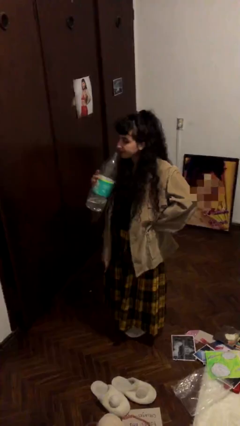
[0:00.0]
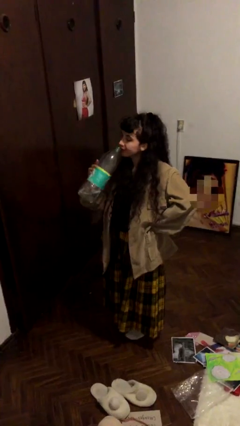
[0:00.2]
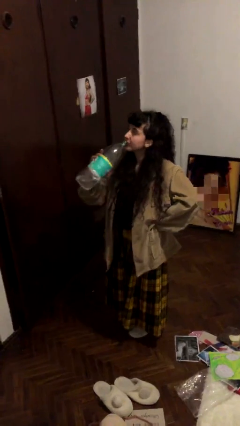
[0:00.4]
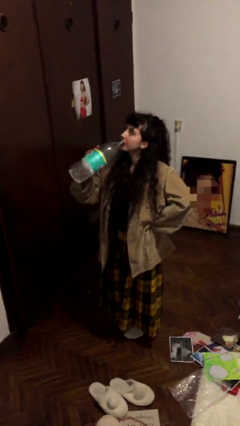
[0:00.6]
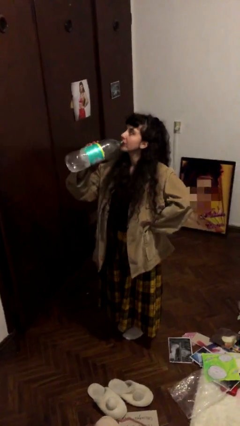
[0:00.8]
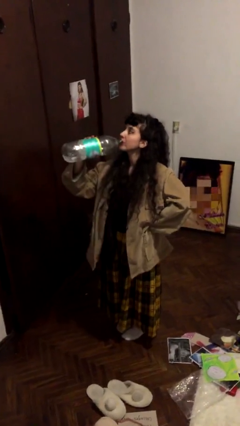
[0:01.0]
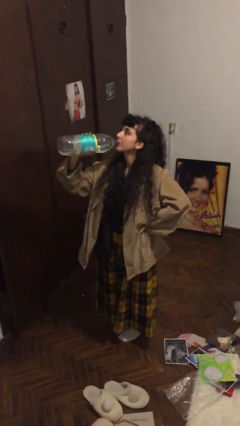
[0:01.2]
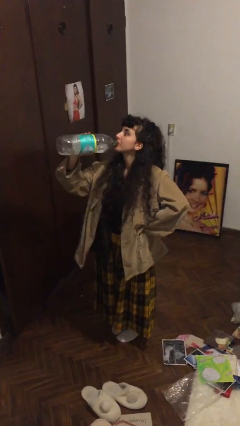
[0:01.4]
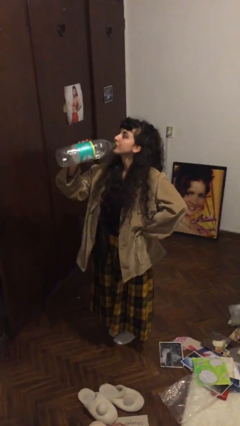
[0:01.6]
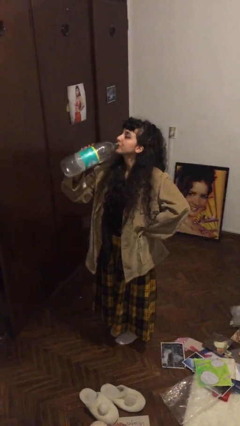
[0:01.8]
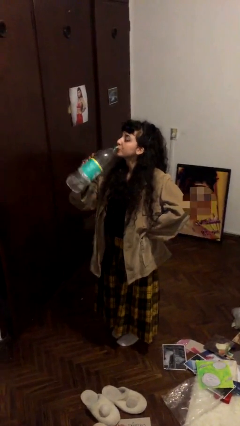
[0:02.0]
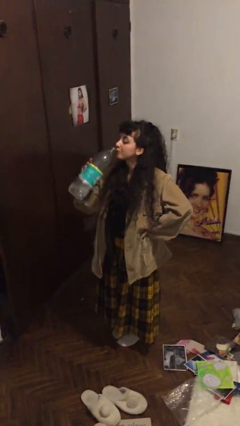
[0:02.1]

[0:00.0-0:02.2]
person drinks from bottle

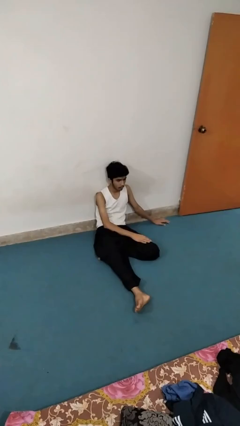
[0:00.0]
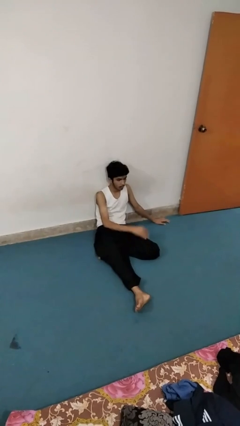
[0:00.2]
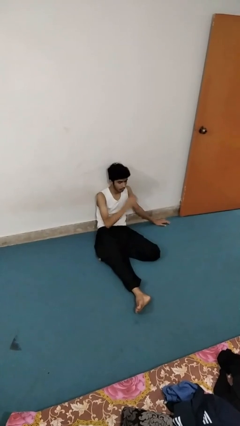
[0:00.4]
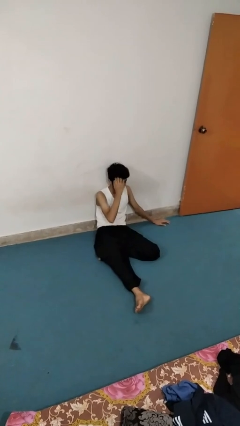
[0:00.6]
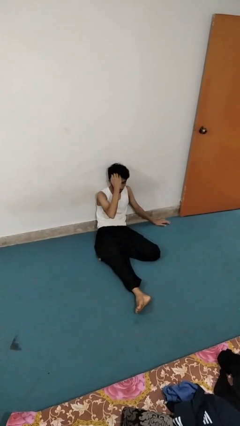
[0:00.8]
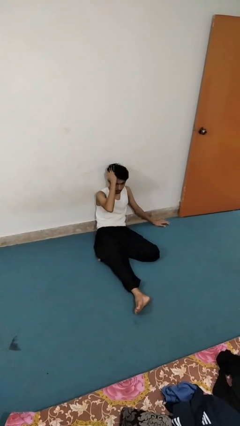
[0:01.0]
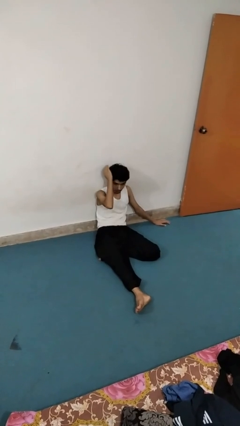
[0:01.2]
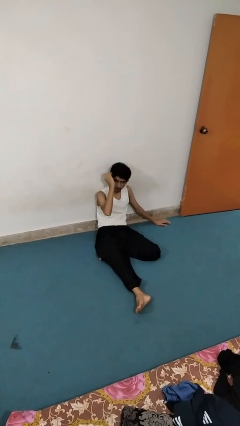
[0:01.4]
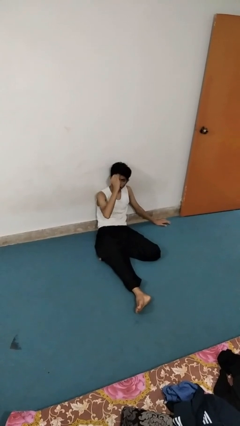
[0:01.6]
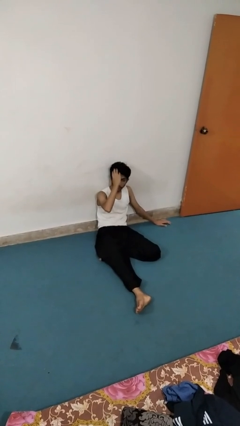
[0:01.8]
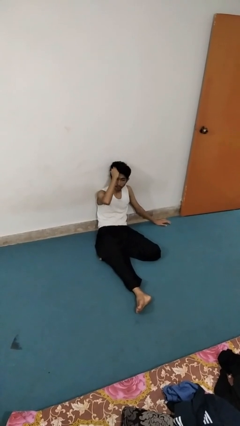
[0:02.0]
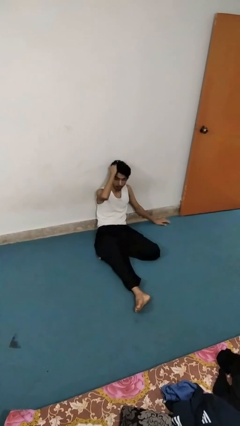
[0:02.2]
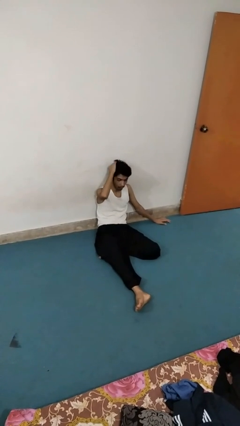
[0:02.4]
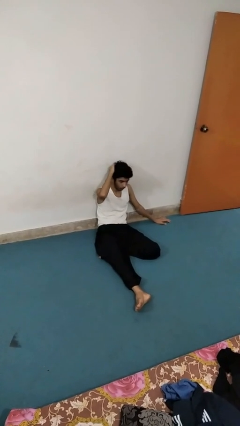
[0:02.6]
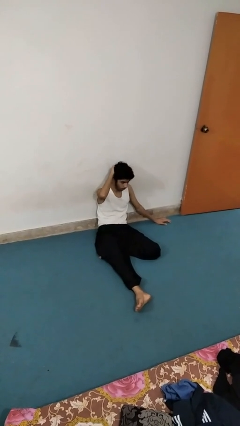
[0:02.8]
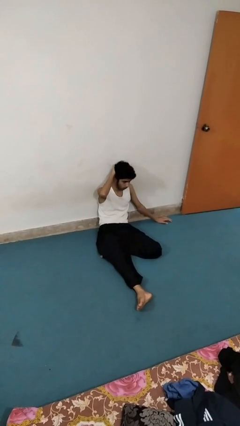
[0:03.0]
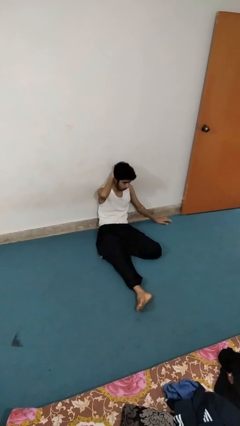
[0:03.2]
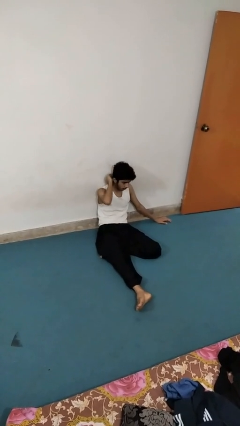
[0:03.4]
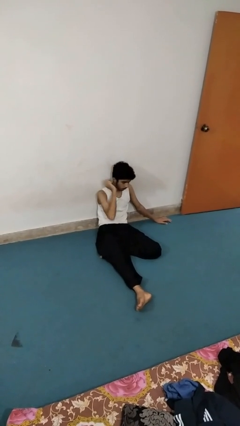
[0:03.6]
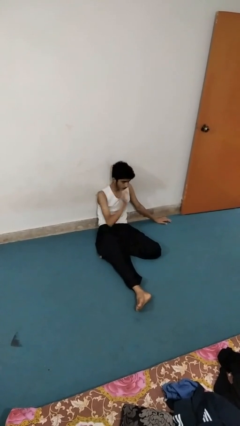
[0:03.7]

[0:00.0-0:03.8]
person strokes hair

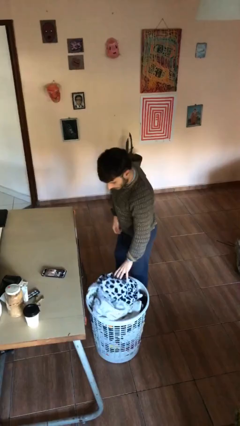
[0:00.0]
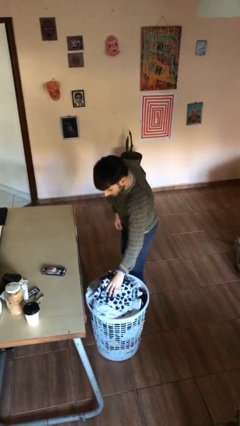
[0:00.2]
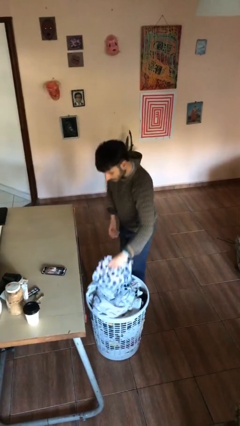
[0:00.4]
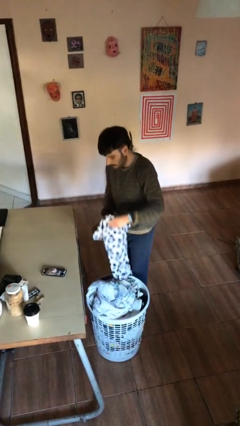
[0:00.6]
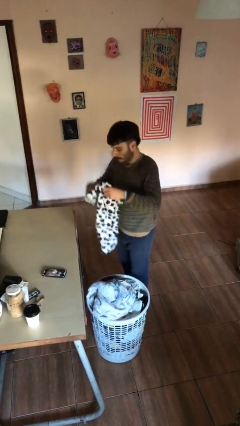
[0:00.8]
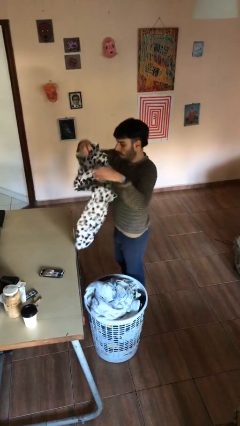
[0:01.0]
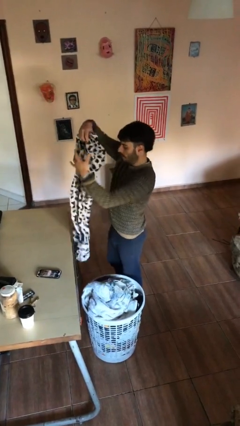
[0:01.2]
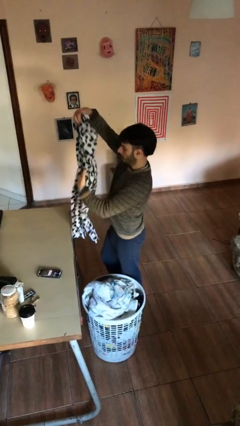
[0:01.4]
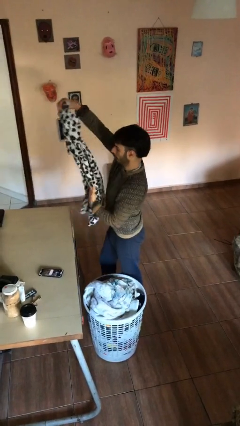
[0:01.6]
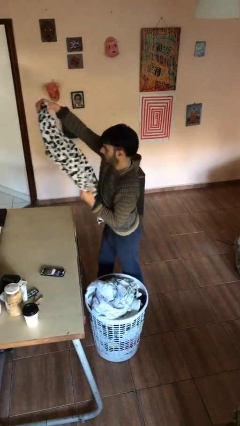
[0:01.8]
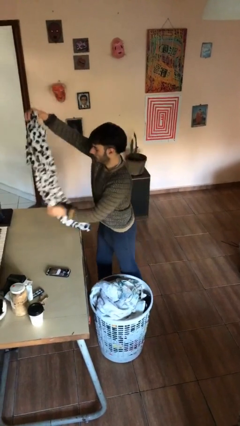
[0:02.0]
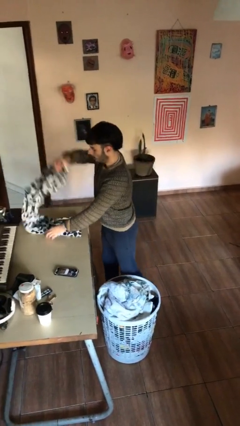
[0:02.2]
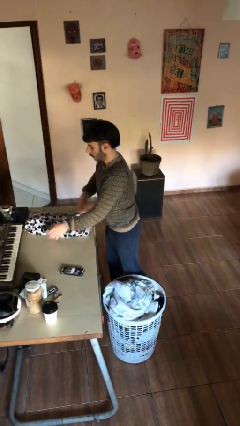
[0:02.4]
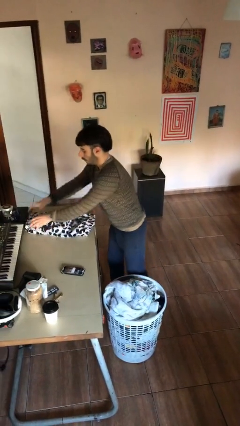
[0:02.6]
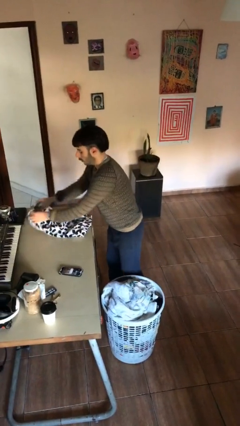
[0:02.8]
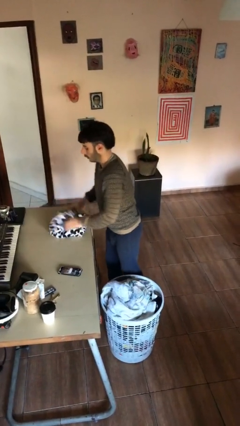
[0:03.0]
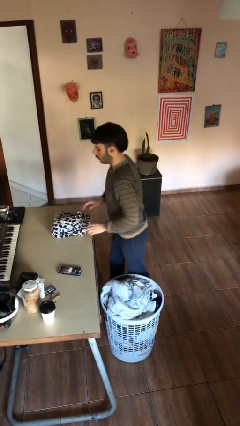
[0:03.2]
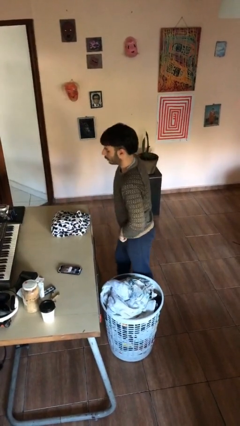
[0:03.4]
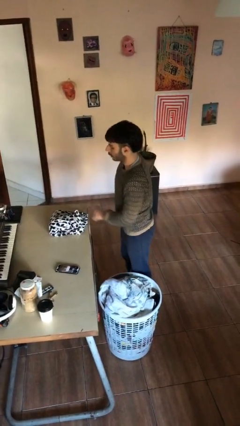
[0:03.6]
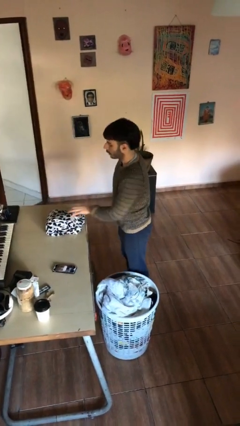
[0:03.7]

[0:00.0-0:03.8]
person folds pants

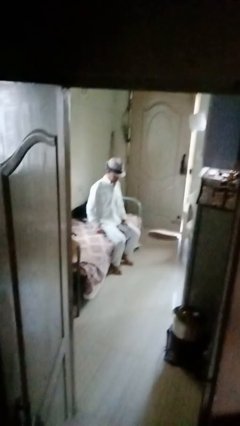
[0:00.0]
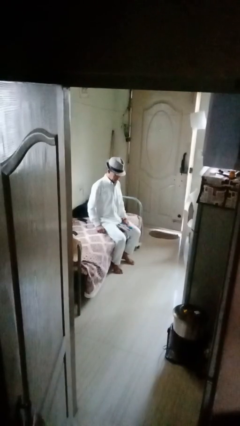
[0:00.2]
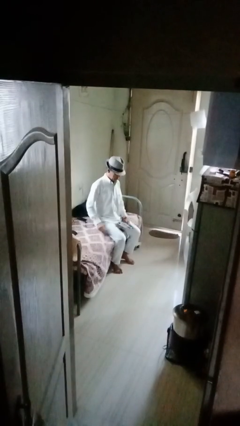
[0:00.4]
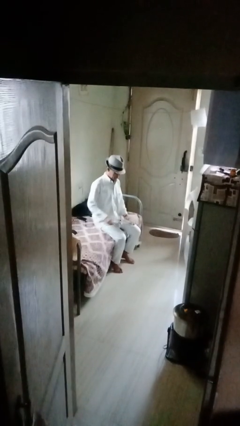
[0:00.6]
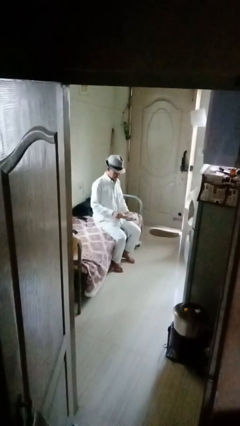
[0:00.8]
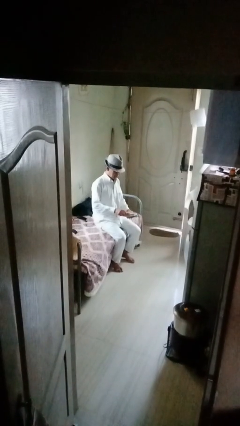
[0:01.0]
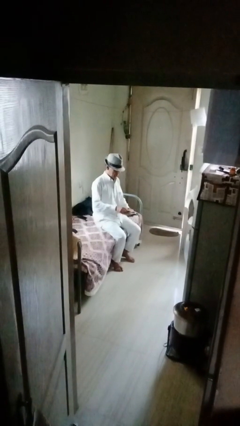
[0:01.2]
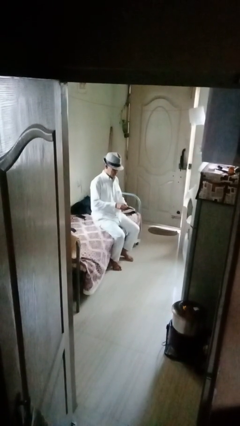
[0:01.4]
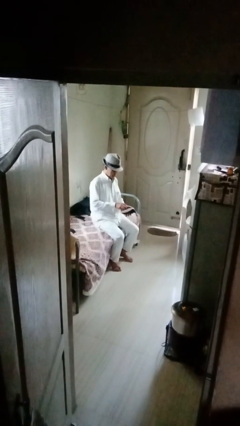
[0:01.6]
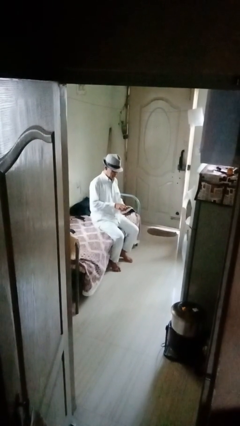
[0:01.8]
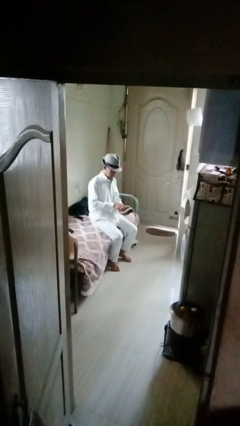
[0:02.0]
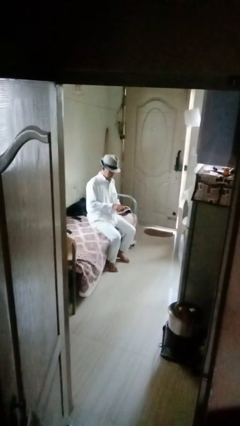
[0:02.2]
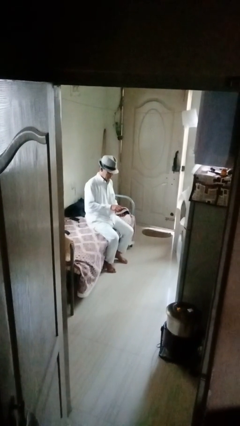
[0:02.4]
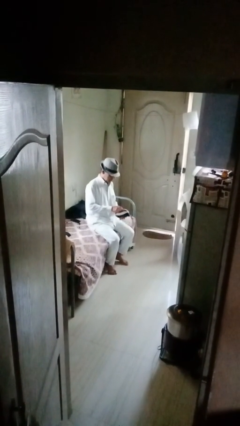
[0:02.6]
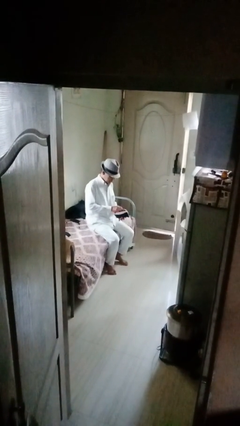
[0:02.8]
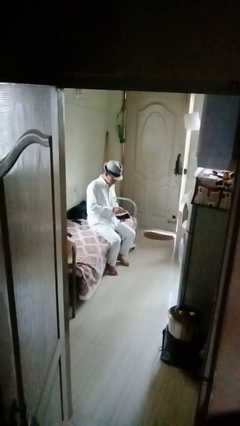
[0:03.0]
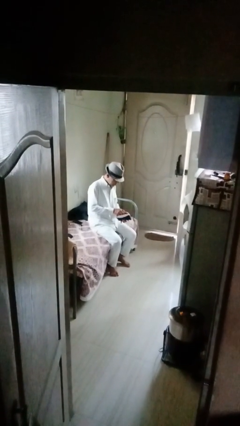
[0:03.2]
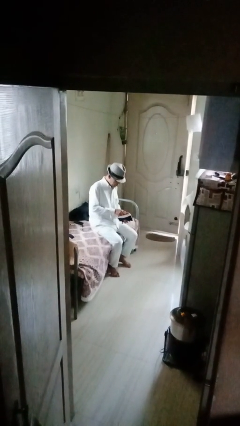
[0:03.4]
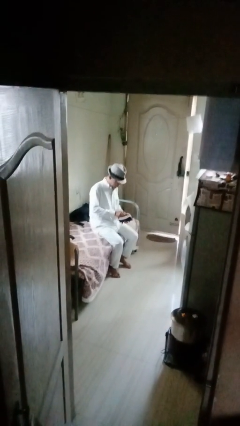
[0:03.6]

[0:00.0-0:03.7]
person searches in purse

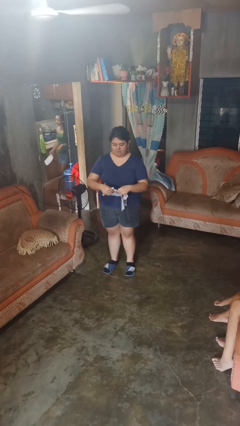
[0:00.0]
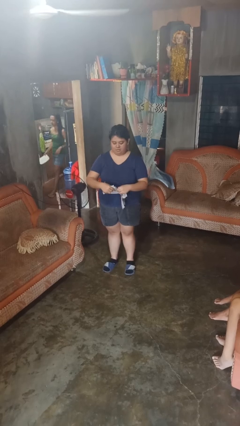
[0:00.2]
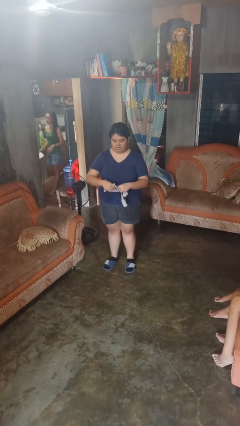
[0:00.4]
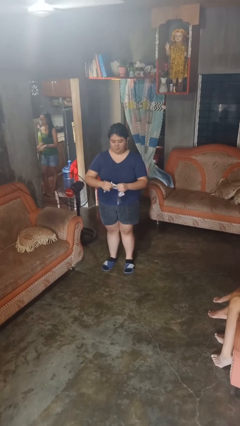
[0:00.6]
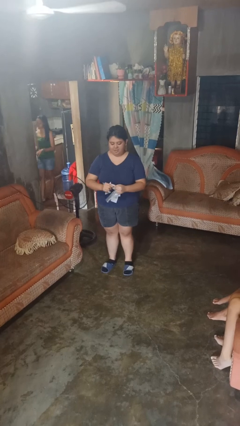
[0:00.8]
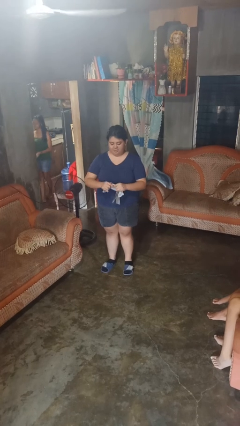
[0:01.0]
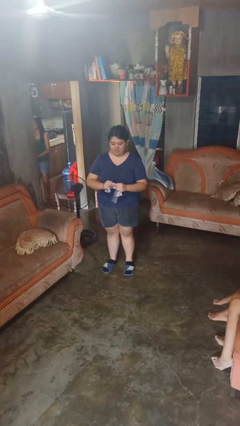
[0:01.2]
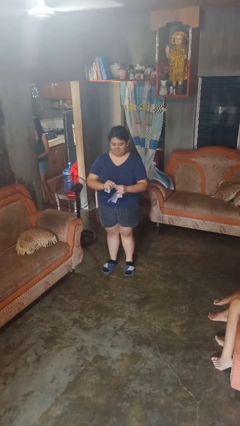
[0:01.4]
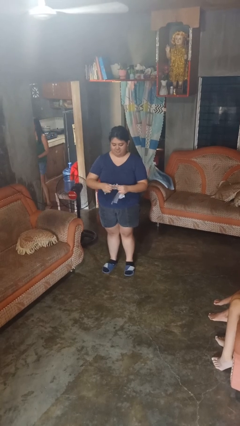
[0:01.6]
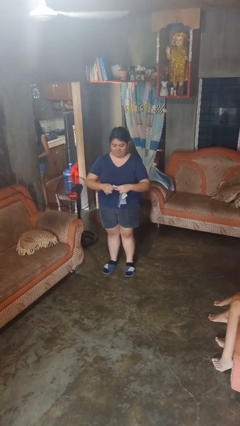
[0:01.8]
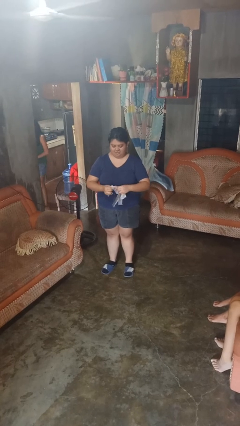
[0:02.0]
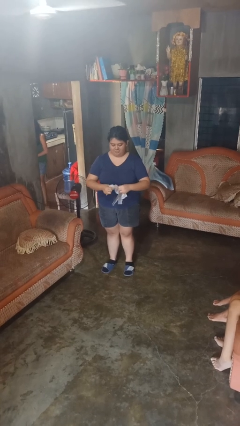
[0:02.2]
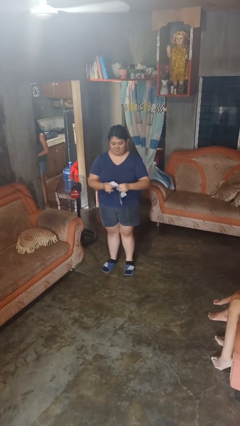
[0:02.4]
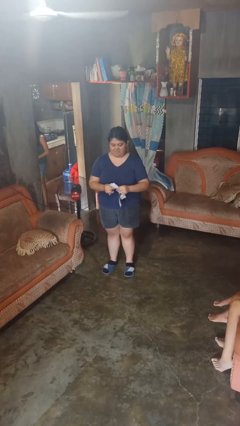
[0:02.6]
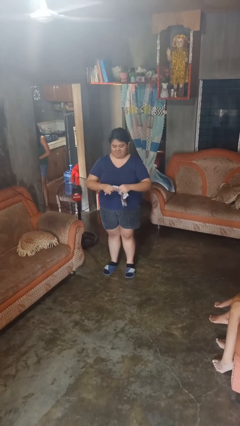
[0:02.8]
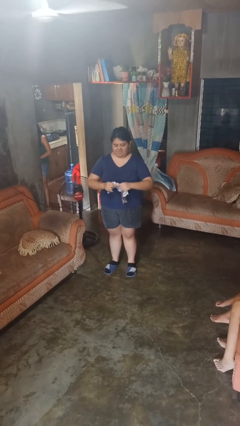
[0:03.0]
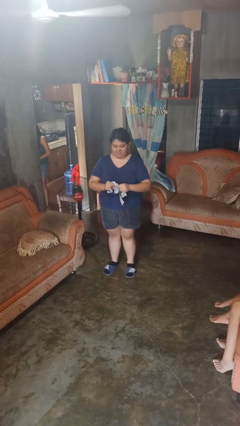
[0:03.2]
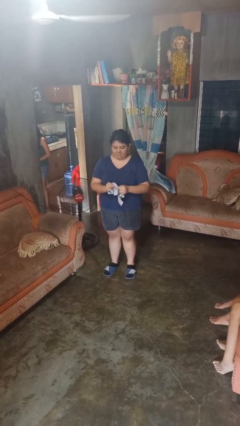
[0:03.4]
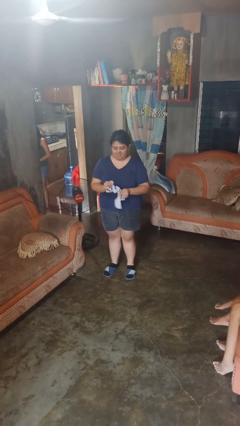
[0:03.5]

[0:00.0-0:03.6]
person tears paper

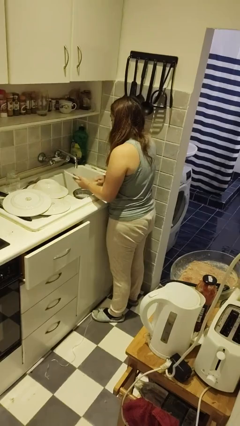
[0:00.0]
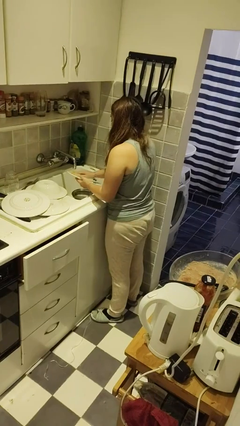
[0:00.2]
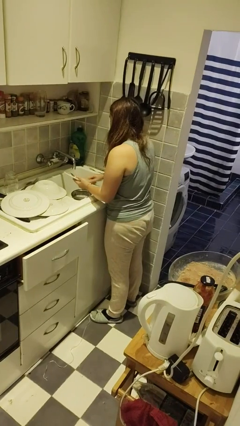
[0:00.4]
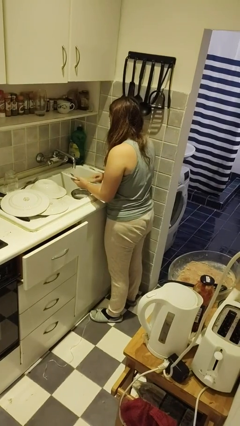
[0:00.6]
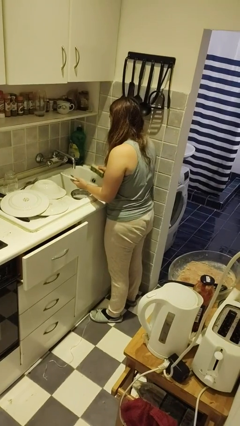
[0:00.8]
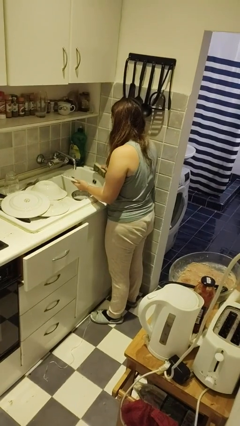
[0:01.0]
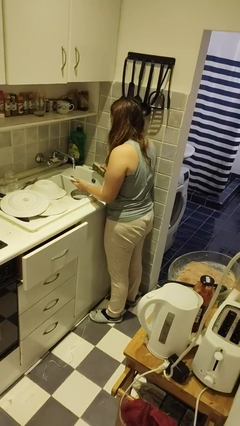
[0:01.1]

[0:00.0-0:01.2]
person washes dish
